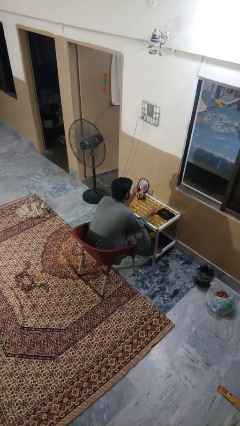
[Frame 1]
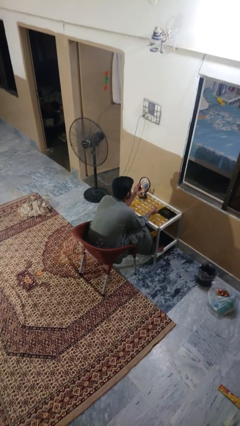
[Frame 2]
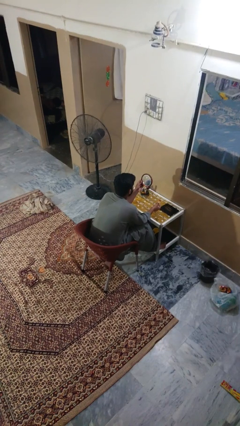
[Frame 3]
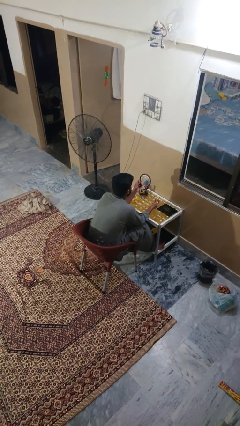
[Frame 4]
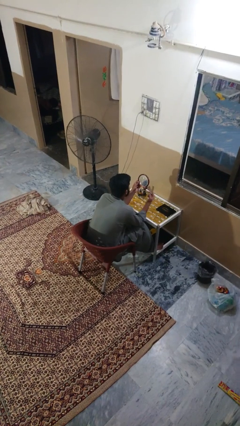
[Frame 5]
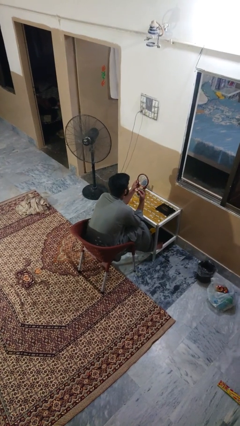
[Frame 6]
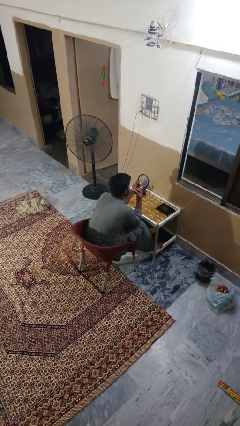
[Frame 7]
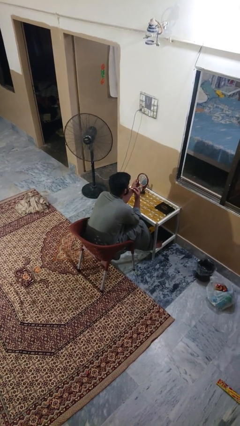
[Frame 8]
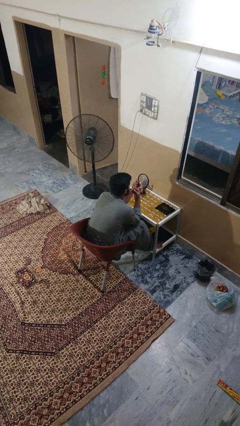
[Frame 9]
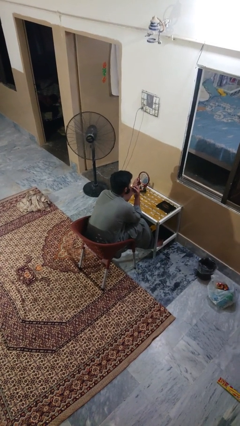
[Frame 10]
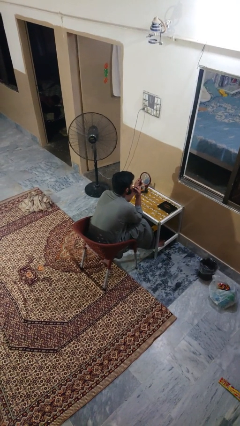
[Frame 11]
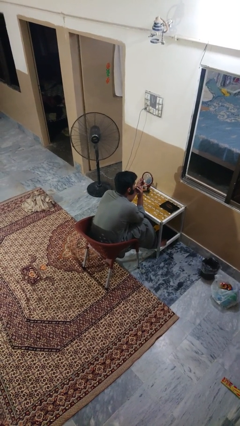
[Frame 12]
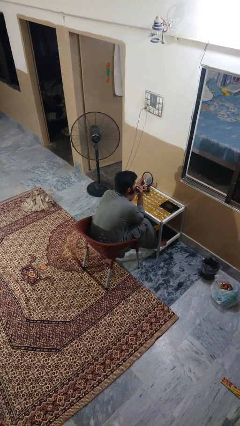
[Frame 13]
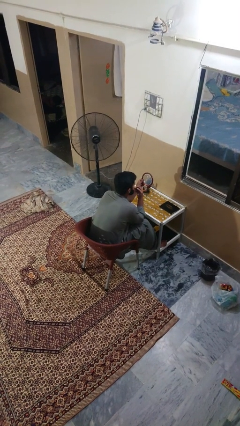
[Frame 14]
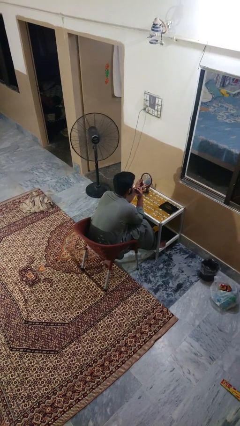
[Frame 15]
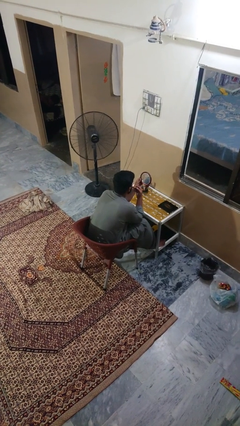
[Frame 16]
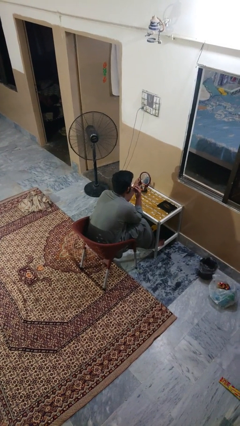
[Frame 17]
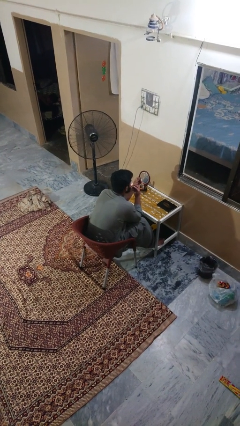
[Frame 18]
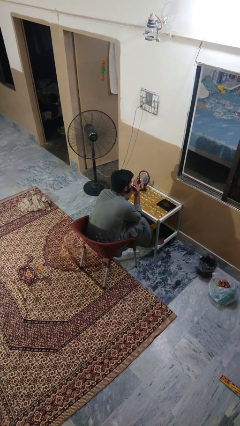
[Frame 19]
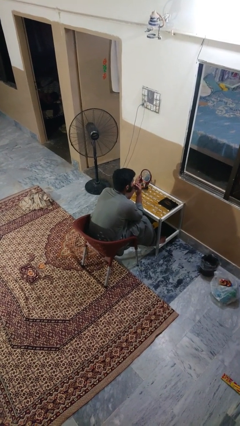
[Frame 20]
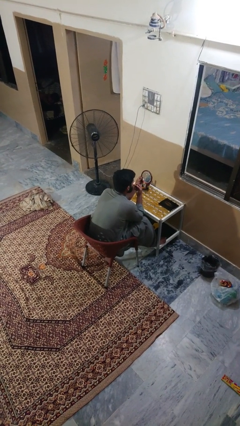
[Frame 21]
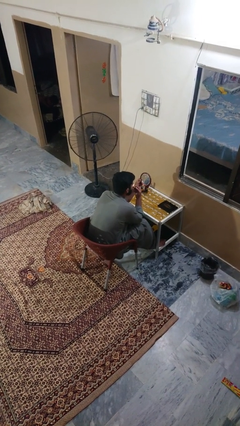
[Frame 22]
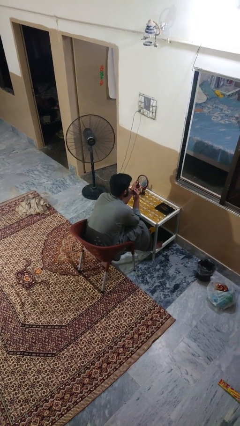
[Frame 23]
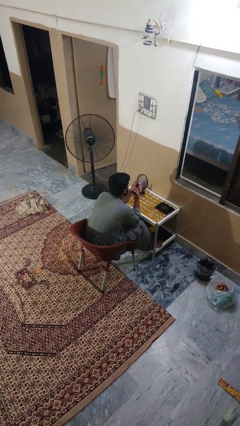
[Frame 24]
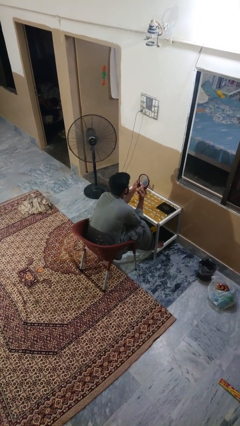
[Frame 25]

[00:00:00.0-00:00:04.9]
person applies lip makeup

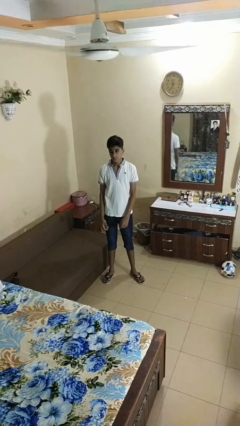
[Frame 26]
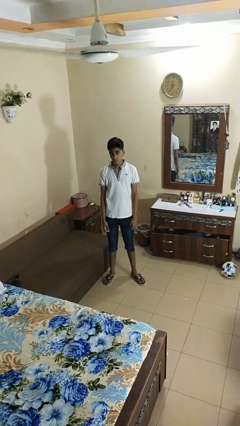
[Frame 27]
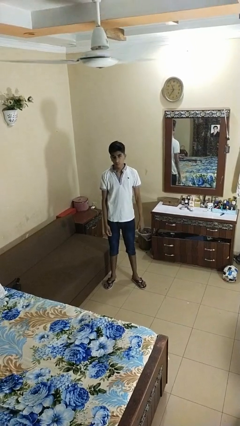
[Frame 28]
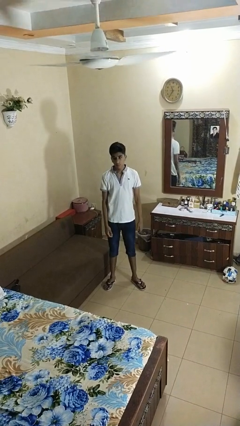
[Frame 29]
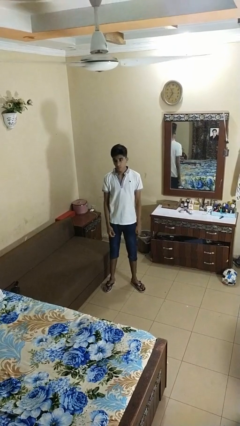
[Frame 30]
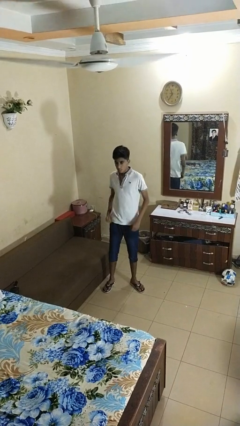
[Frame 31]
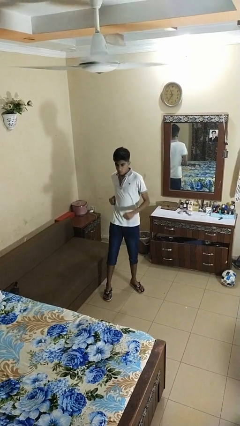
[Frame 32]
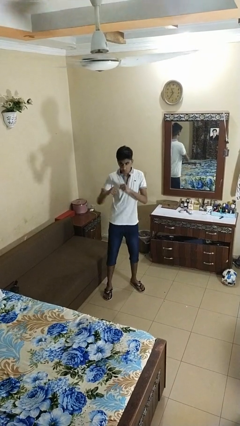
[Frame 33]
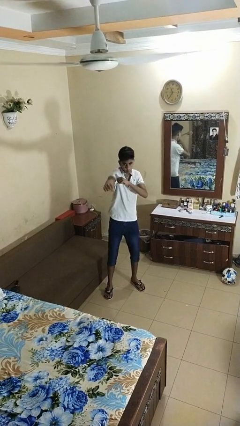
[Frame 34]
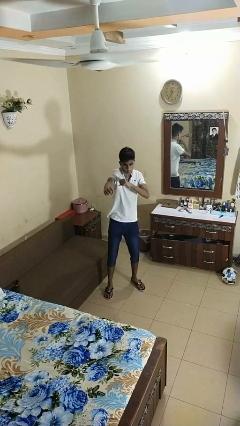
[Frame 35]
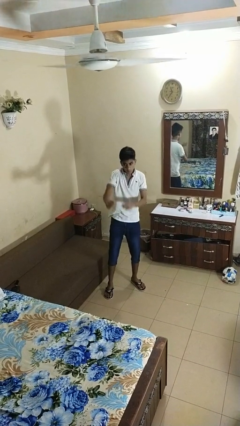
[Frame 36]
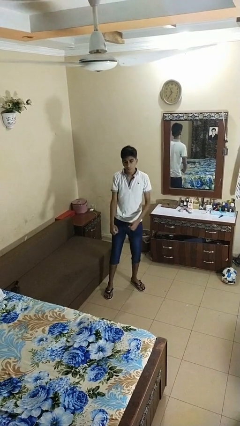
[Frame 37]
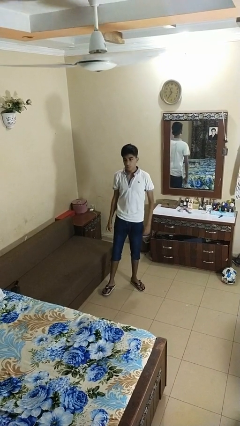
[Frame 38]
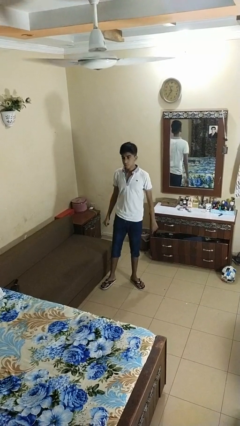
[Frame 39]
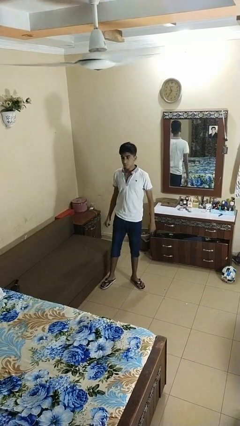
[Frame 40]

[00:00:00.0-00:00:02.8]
person punches

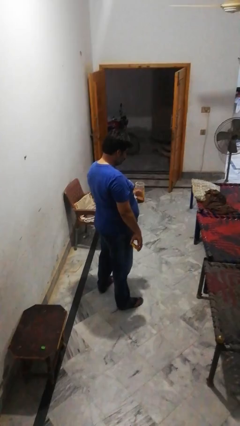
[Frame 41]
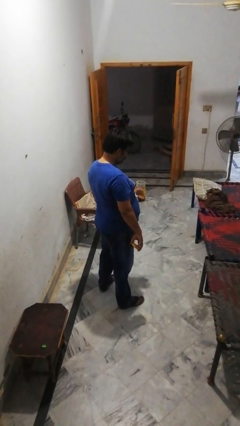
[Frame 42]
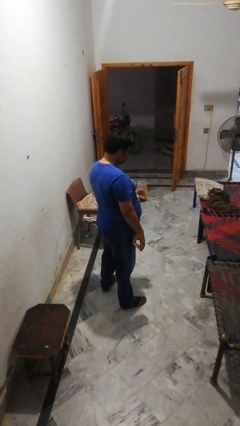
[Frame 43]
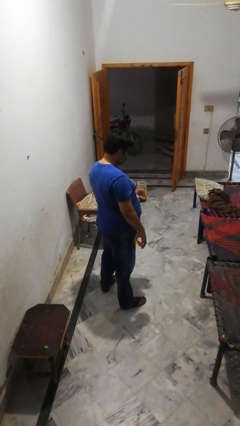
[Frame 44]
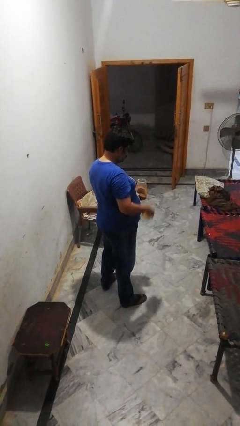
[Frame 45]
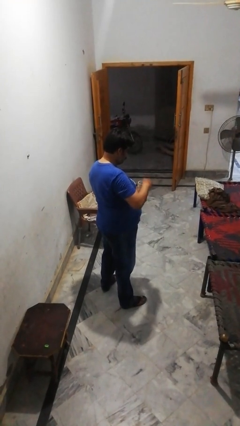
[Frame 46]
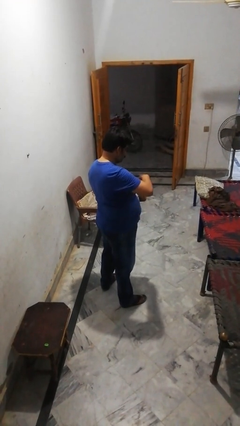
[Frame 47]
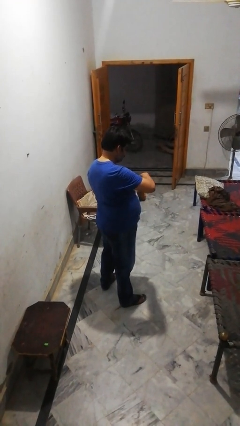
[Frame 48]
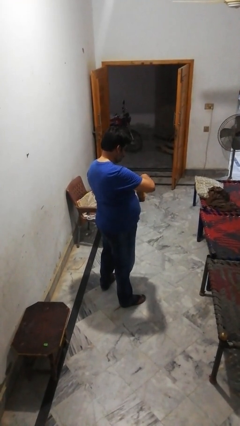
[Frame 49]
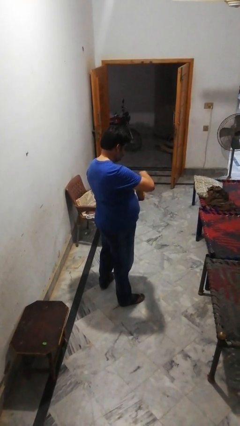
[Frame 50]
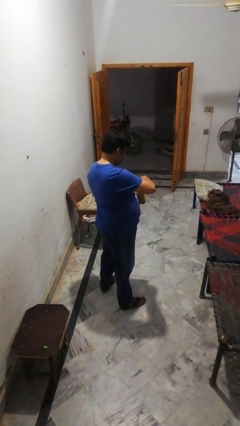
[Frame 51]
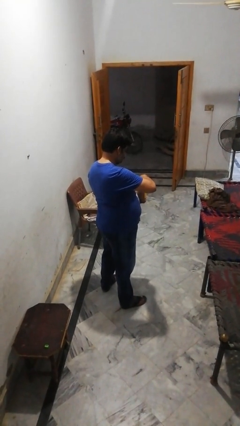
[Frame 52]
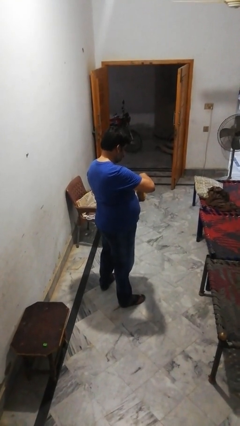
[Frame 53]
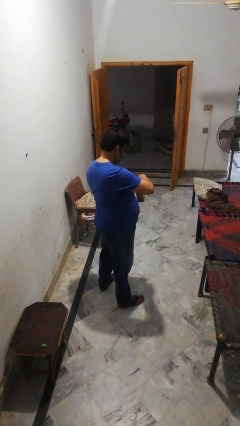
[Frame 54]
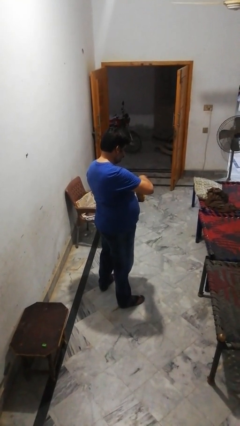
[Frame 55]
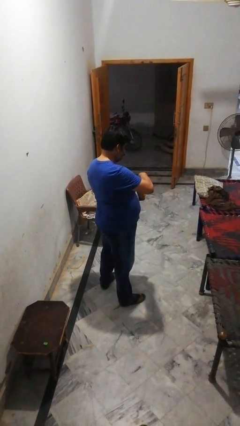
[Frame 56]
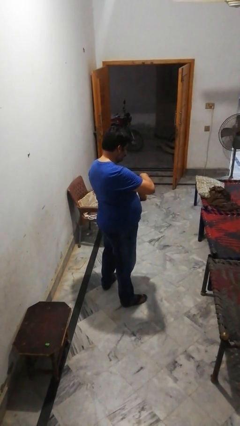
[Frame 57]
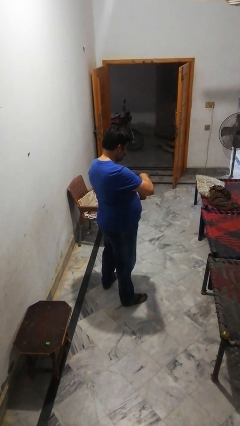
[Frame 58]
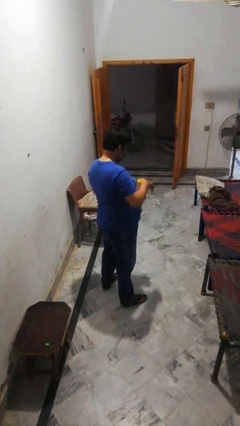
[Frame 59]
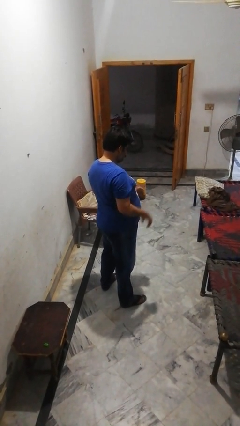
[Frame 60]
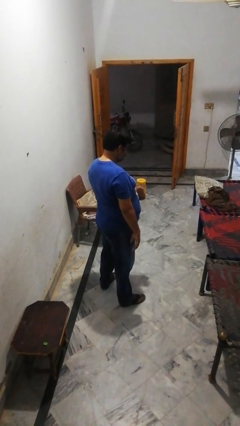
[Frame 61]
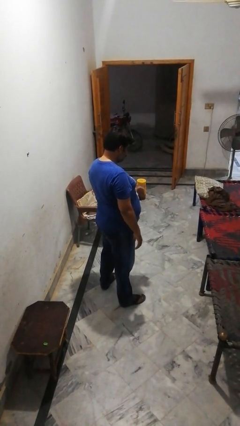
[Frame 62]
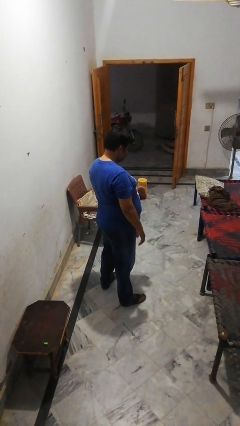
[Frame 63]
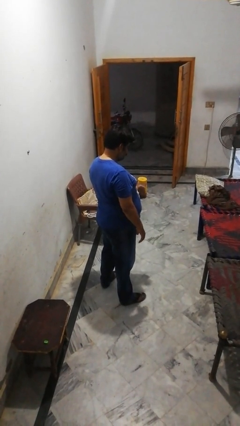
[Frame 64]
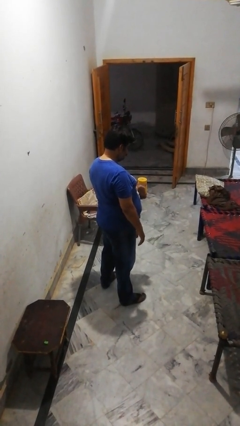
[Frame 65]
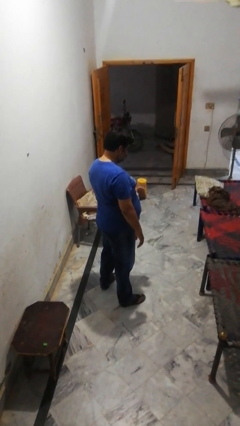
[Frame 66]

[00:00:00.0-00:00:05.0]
person closes jar

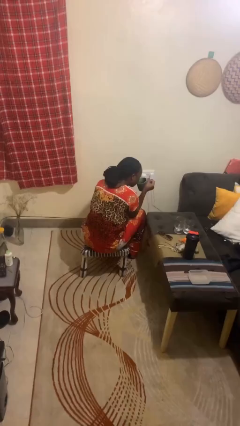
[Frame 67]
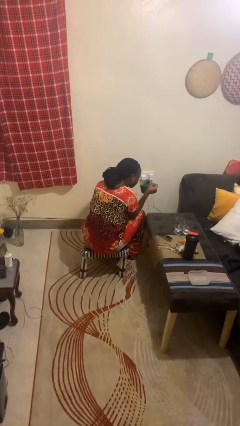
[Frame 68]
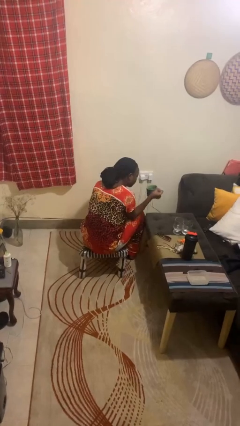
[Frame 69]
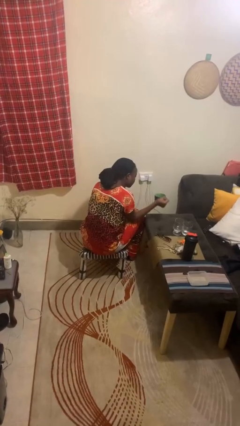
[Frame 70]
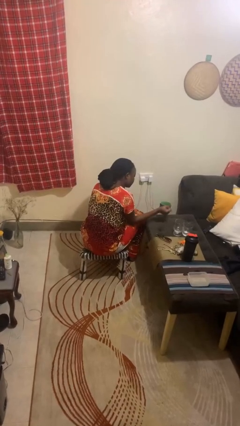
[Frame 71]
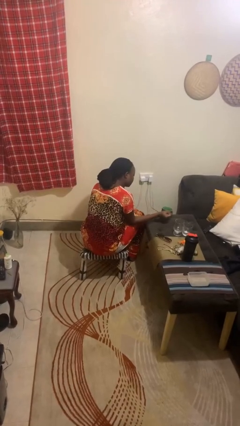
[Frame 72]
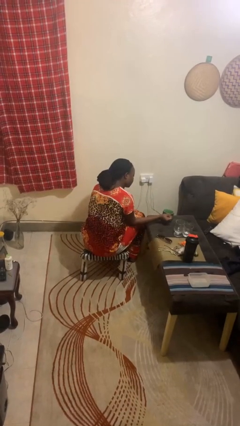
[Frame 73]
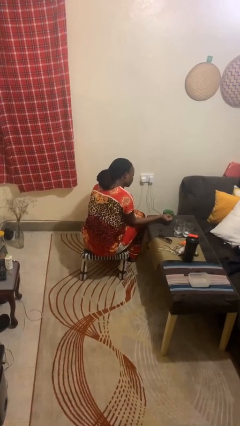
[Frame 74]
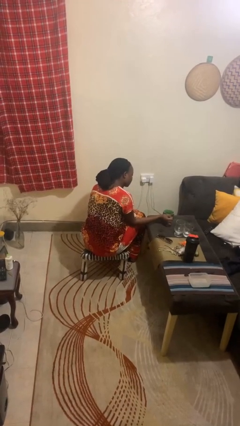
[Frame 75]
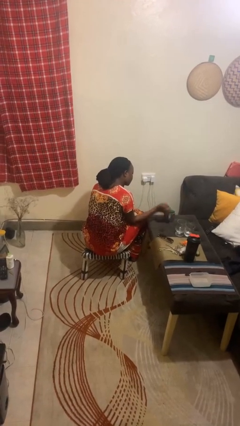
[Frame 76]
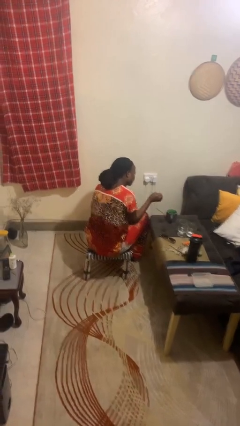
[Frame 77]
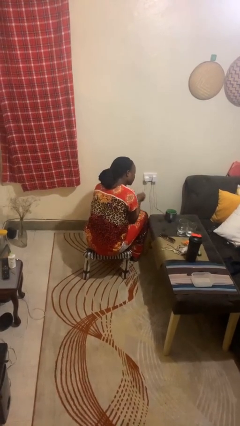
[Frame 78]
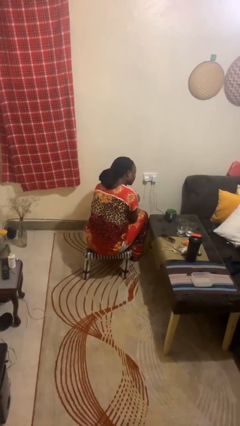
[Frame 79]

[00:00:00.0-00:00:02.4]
person puts down object on table

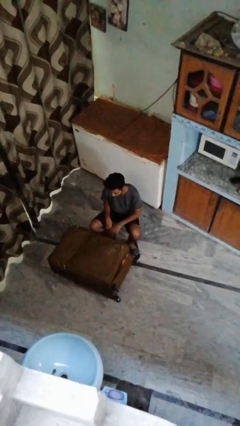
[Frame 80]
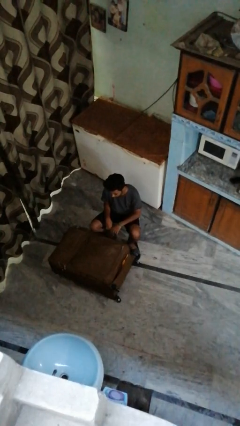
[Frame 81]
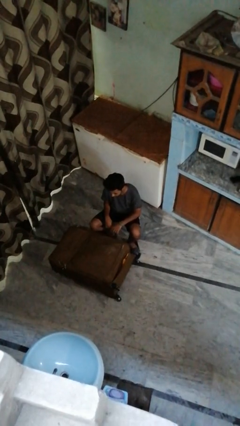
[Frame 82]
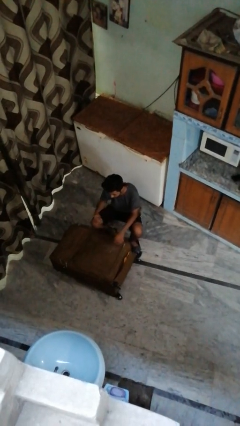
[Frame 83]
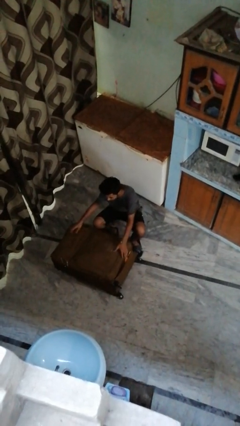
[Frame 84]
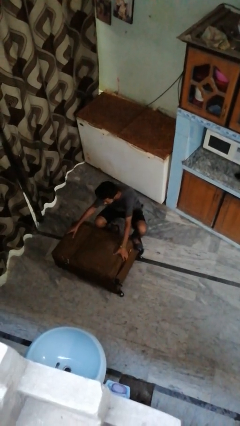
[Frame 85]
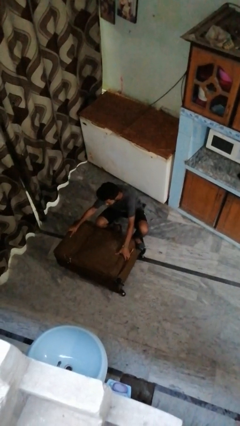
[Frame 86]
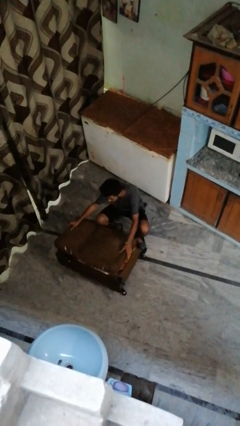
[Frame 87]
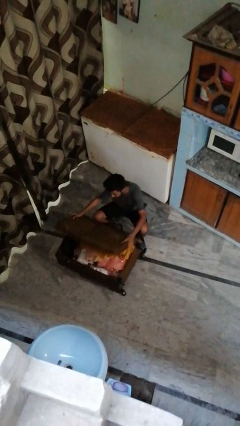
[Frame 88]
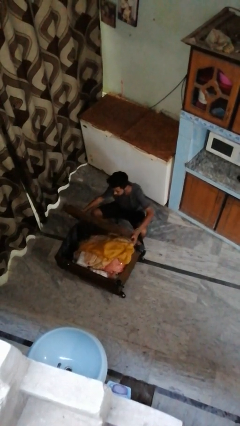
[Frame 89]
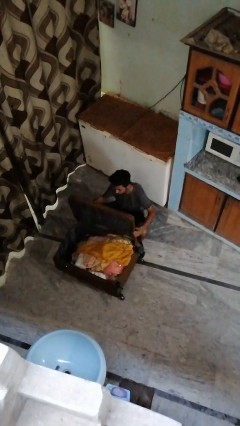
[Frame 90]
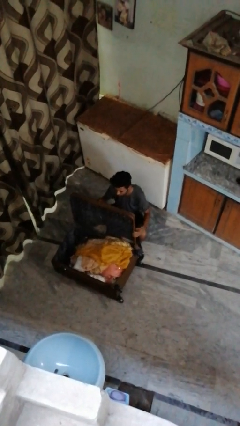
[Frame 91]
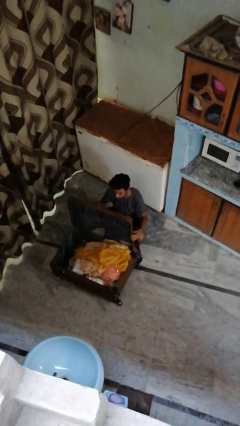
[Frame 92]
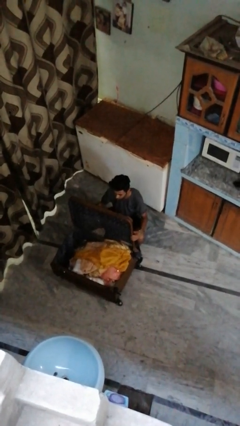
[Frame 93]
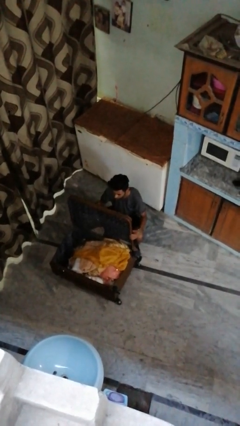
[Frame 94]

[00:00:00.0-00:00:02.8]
person opens suitcase
